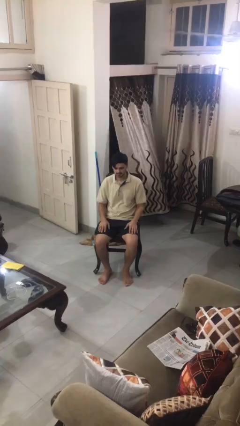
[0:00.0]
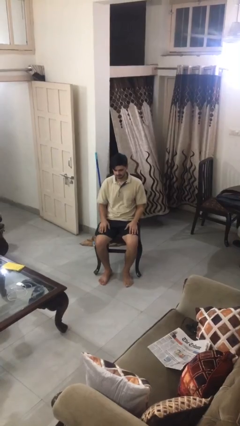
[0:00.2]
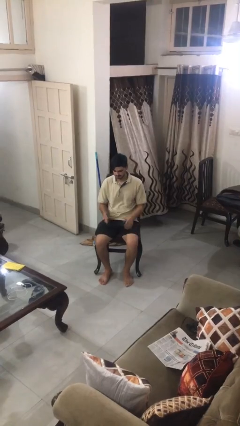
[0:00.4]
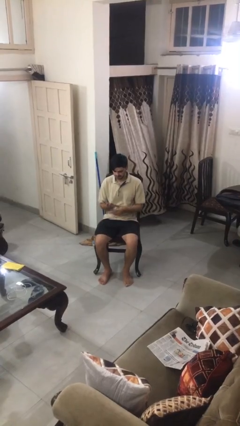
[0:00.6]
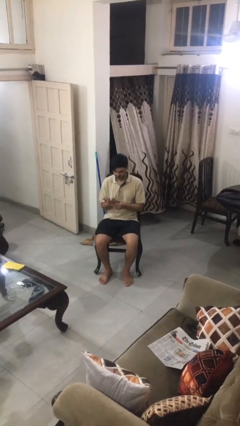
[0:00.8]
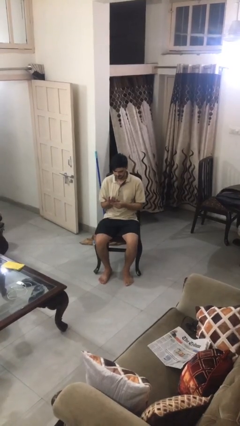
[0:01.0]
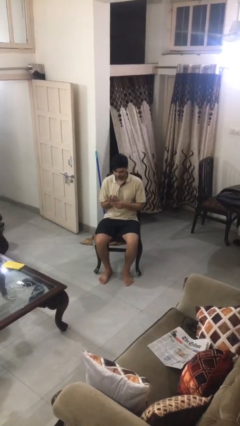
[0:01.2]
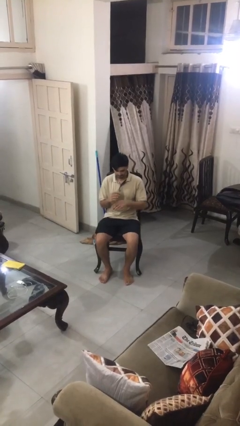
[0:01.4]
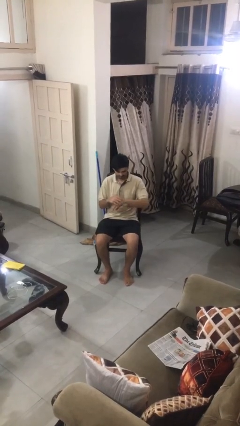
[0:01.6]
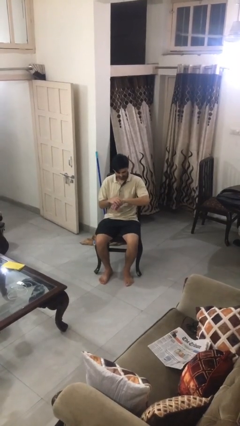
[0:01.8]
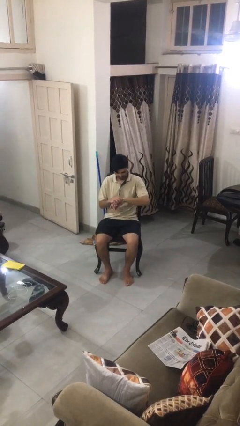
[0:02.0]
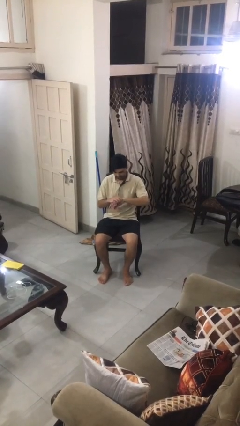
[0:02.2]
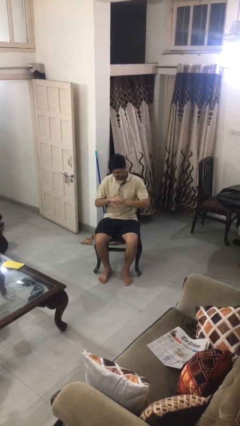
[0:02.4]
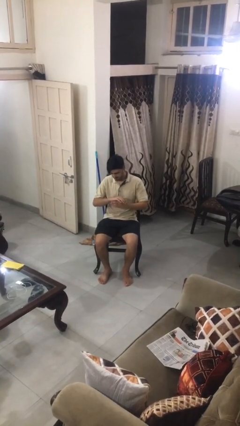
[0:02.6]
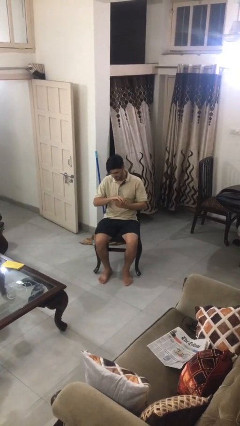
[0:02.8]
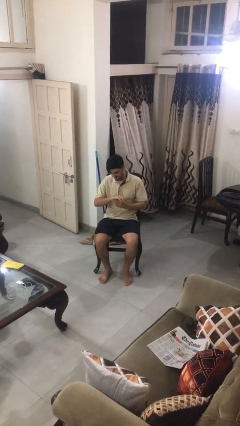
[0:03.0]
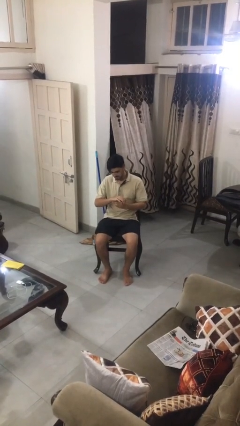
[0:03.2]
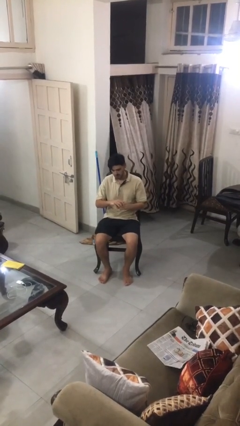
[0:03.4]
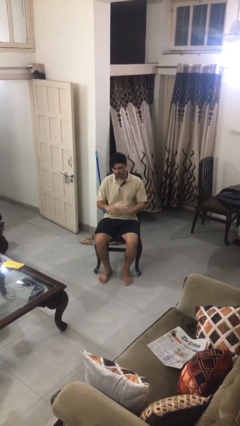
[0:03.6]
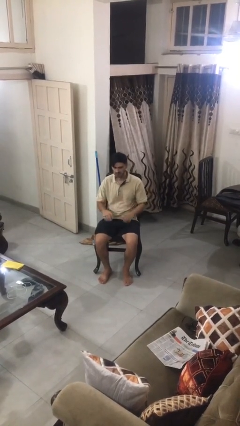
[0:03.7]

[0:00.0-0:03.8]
person looks at hands in lap

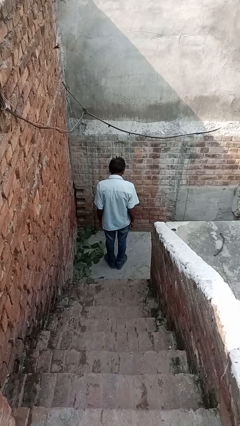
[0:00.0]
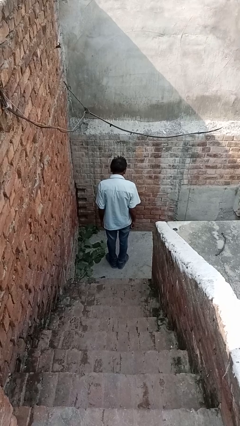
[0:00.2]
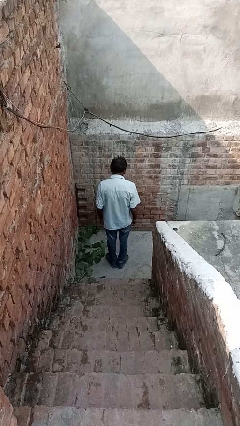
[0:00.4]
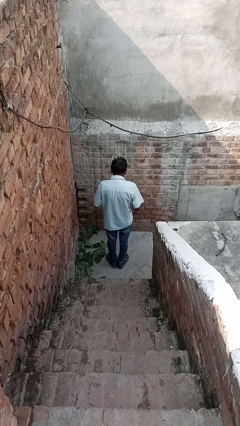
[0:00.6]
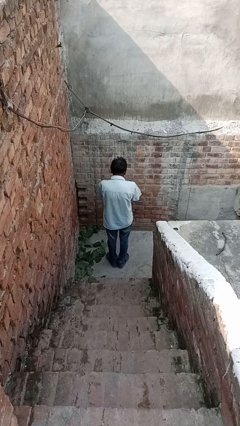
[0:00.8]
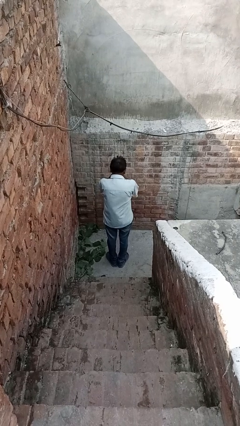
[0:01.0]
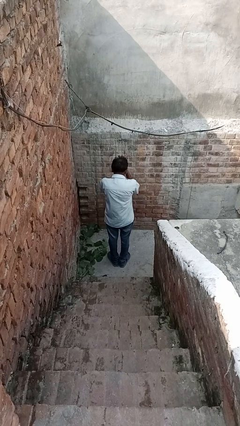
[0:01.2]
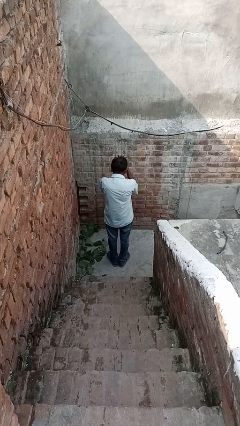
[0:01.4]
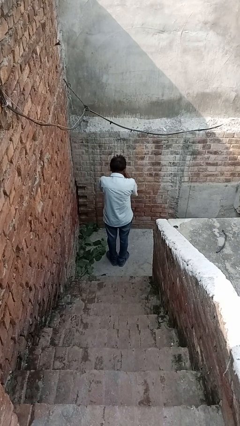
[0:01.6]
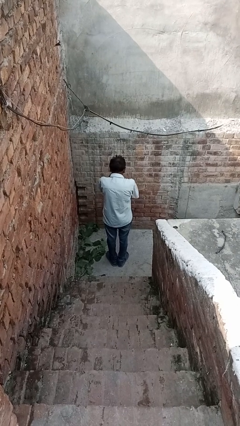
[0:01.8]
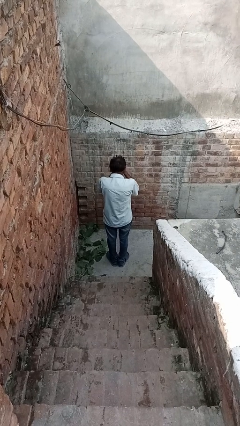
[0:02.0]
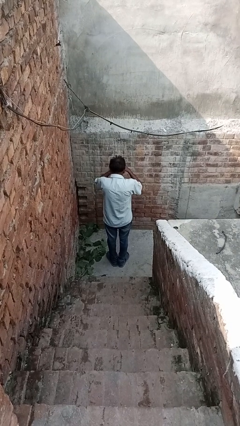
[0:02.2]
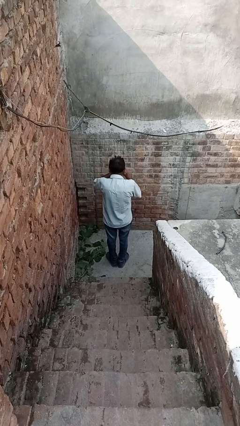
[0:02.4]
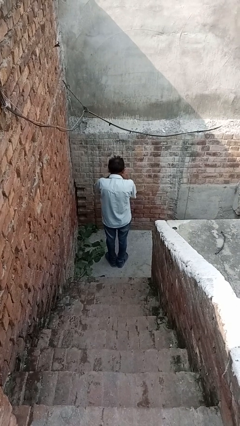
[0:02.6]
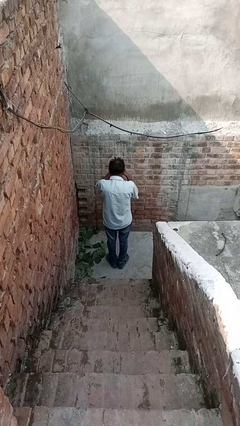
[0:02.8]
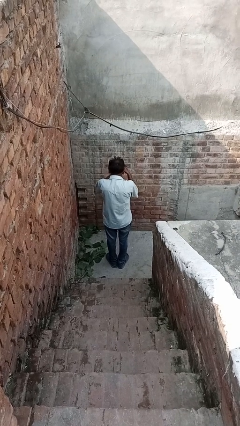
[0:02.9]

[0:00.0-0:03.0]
person blows into hands

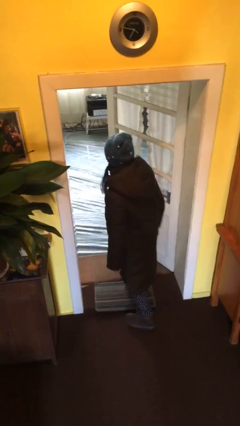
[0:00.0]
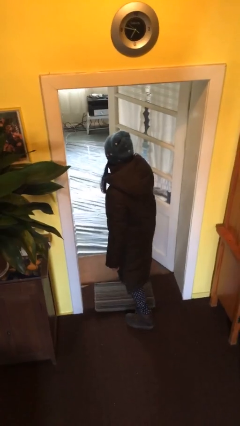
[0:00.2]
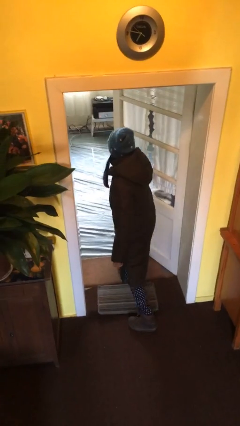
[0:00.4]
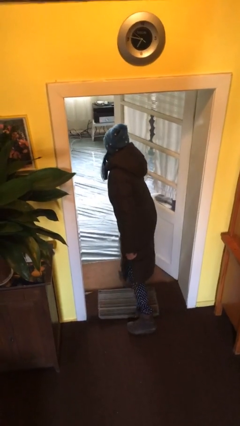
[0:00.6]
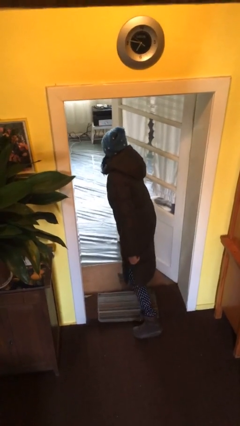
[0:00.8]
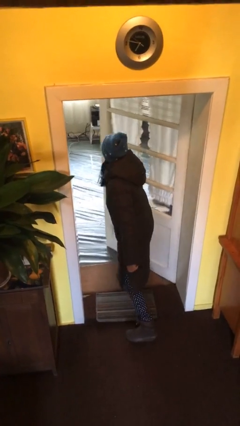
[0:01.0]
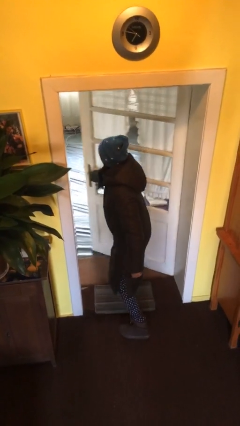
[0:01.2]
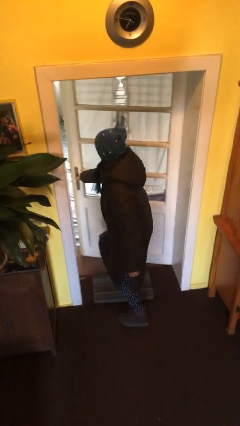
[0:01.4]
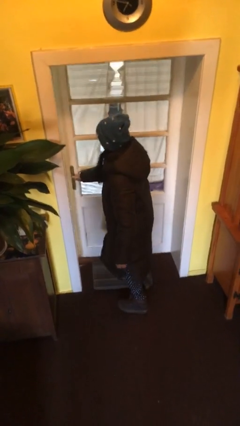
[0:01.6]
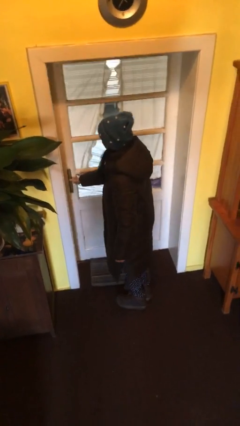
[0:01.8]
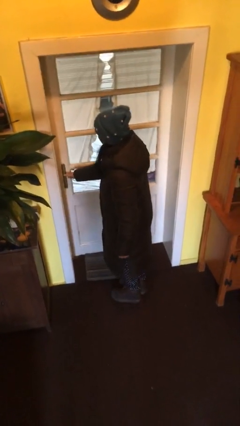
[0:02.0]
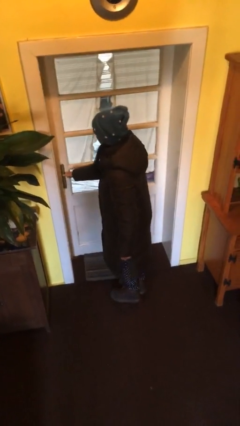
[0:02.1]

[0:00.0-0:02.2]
person closes facility door

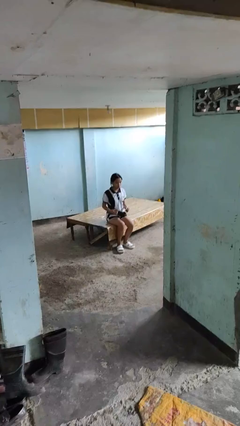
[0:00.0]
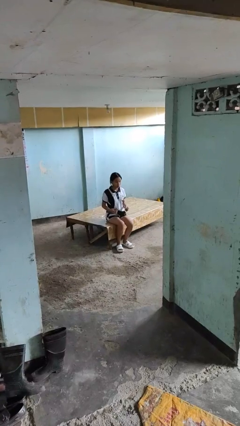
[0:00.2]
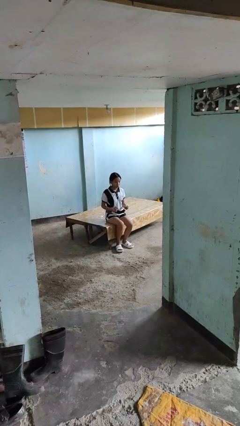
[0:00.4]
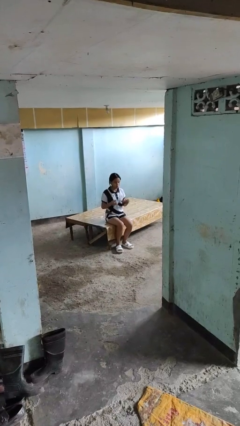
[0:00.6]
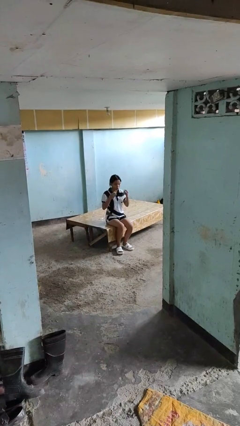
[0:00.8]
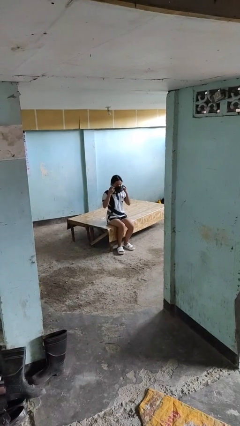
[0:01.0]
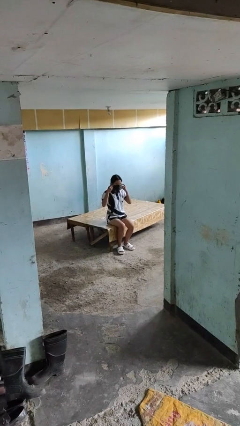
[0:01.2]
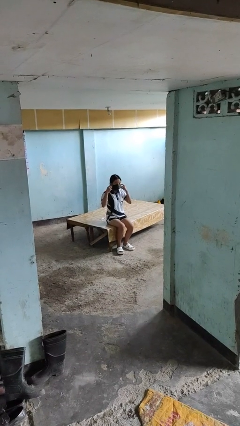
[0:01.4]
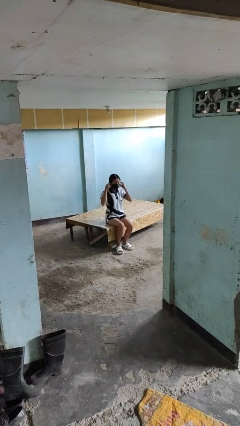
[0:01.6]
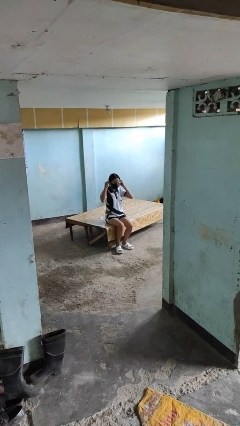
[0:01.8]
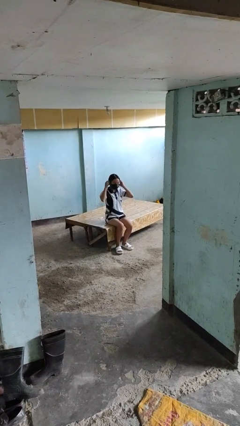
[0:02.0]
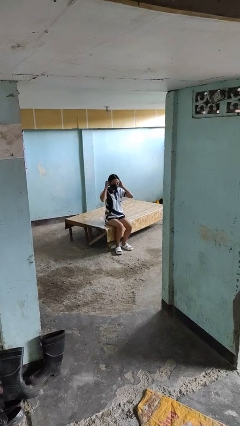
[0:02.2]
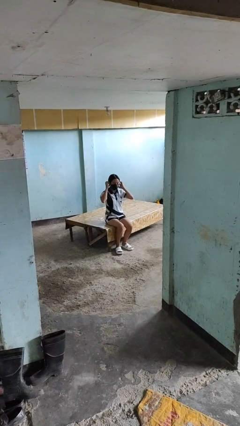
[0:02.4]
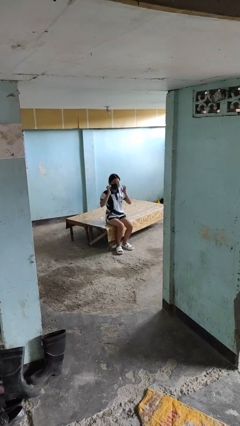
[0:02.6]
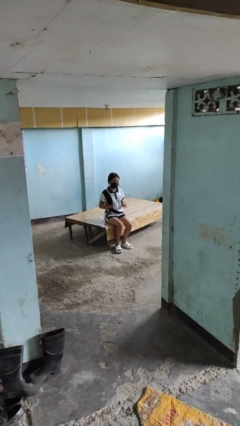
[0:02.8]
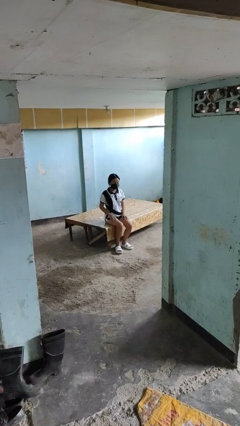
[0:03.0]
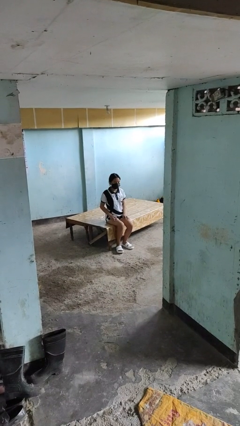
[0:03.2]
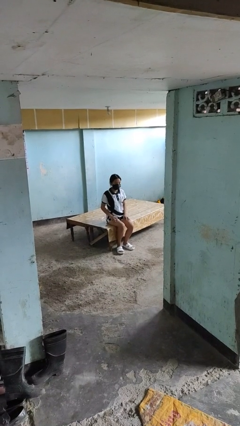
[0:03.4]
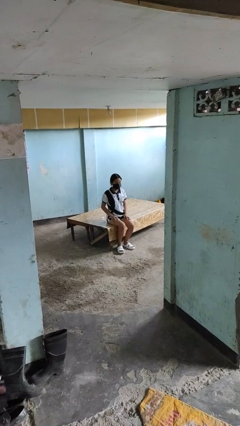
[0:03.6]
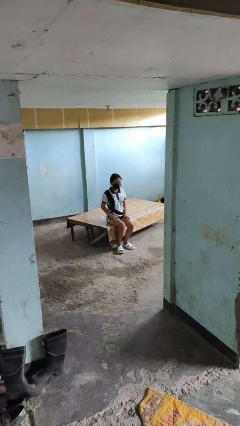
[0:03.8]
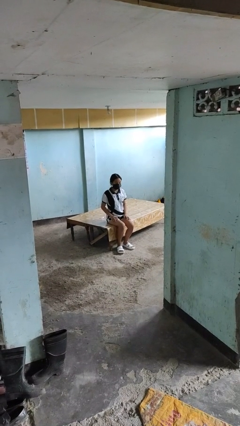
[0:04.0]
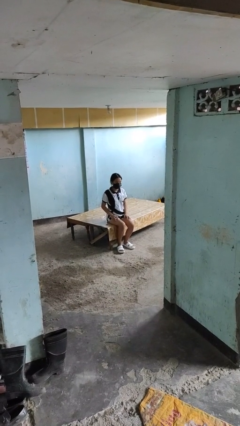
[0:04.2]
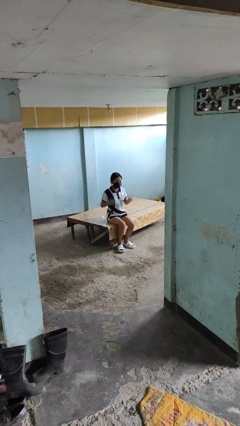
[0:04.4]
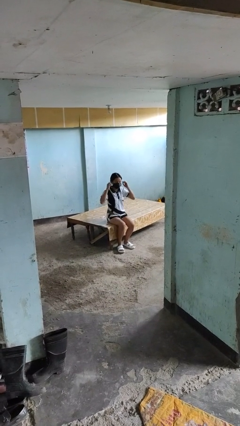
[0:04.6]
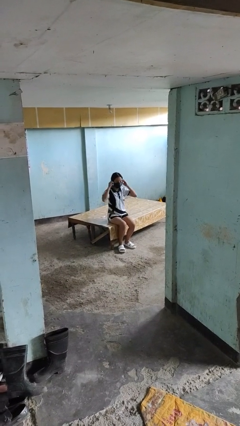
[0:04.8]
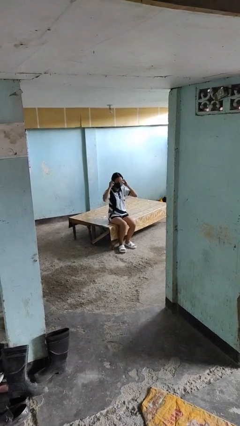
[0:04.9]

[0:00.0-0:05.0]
person puts on facemask

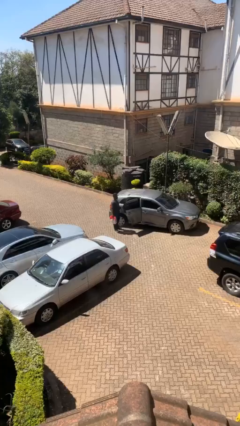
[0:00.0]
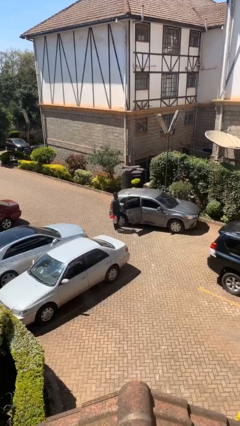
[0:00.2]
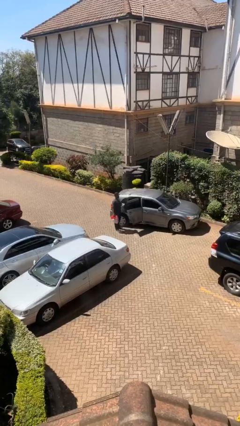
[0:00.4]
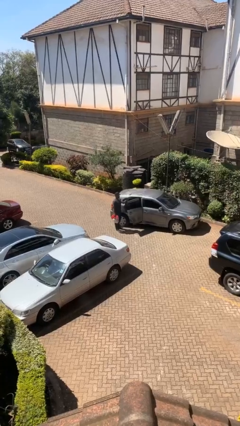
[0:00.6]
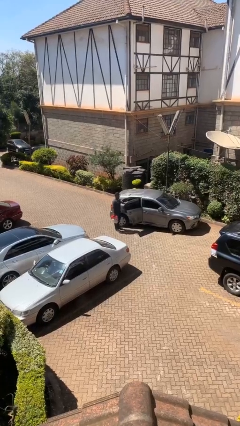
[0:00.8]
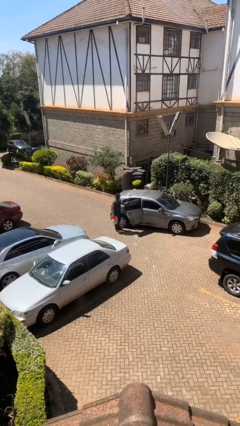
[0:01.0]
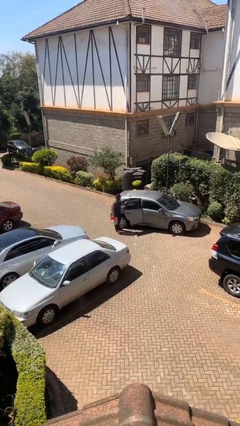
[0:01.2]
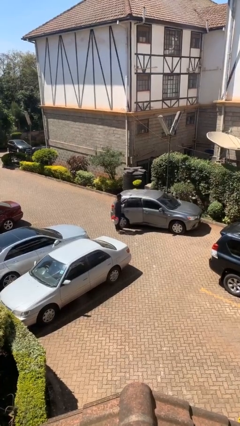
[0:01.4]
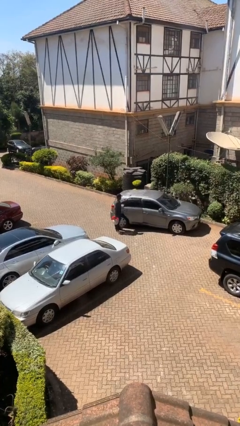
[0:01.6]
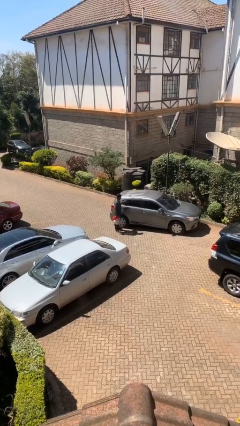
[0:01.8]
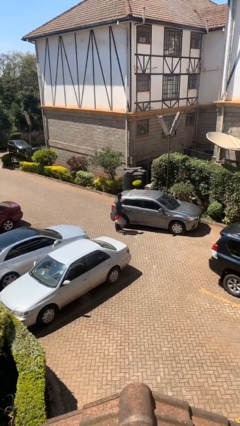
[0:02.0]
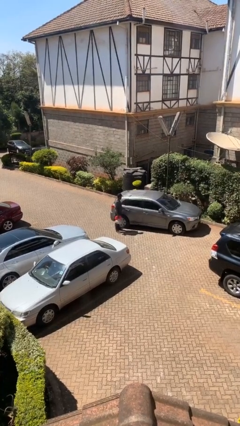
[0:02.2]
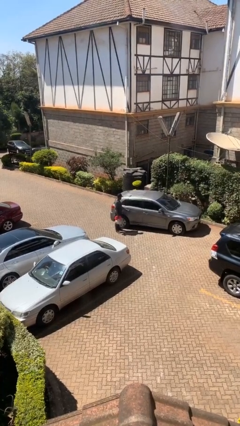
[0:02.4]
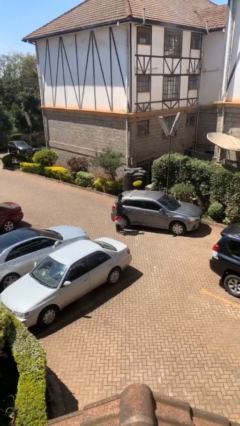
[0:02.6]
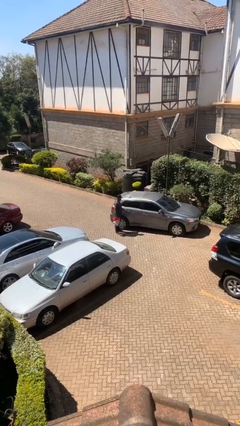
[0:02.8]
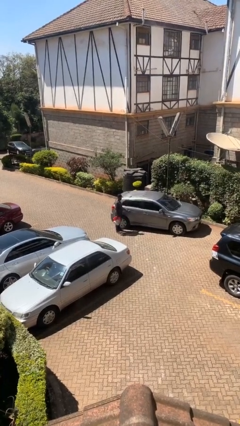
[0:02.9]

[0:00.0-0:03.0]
person closes car door

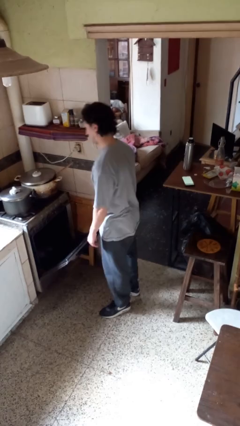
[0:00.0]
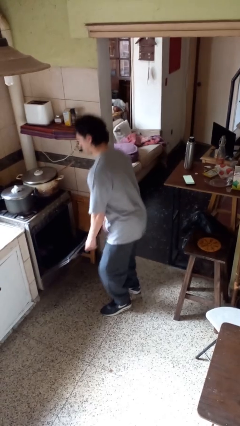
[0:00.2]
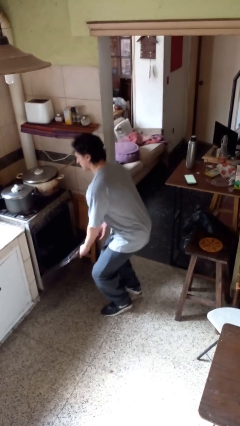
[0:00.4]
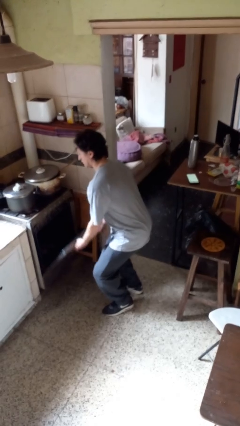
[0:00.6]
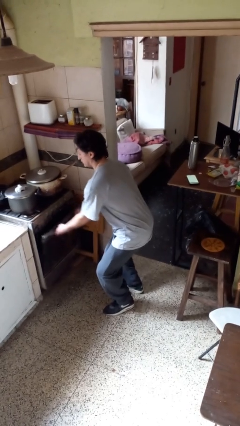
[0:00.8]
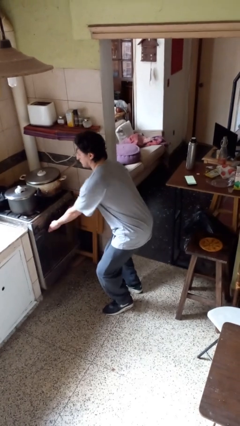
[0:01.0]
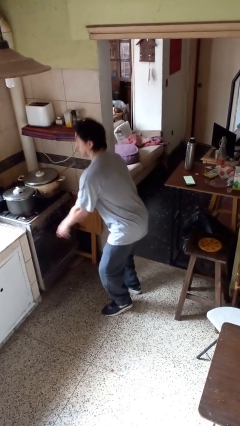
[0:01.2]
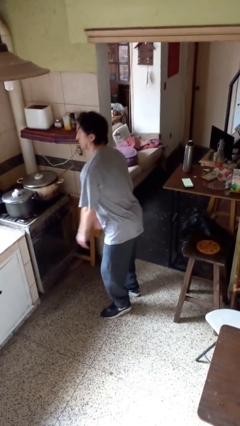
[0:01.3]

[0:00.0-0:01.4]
person closes oven door
